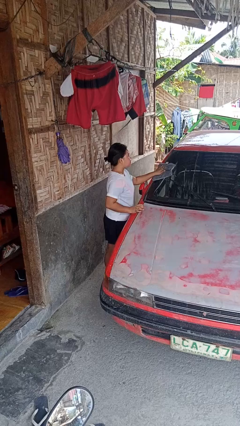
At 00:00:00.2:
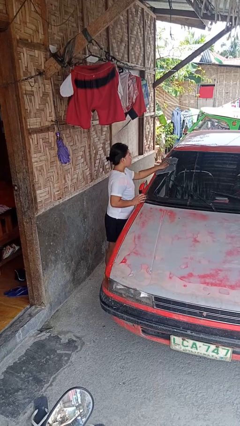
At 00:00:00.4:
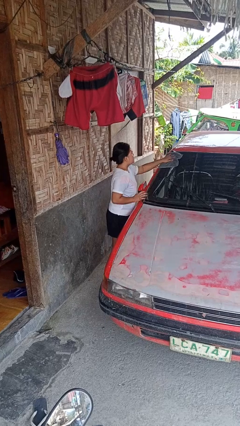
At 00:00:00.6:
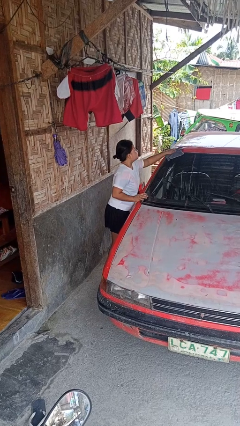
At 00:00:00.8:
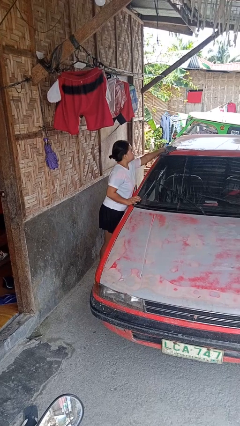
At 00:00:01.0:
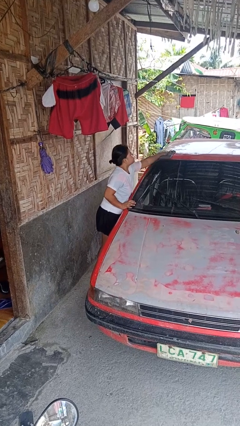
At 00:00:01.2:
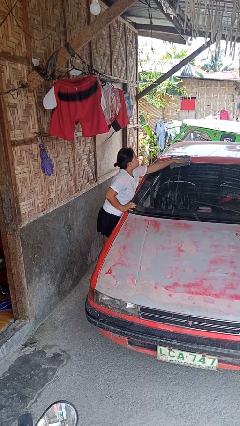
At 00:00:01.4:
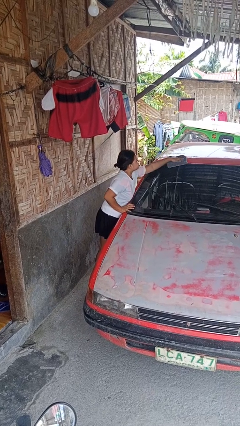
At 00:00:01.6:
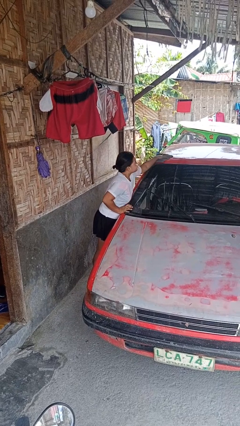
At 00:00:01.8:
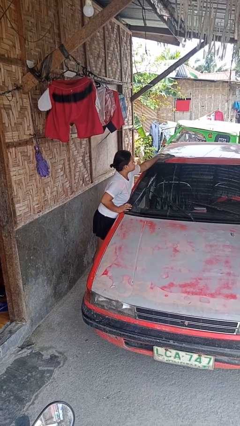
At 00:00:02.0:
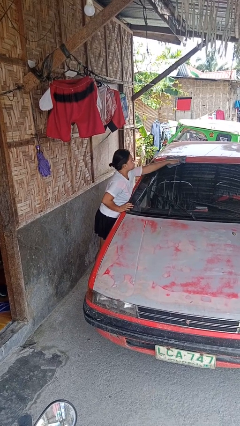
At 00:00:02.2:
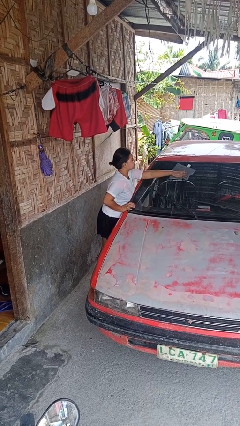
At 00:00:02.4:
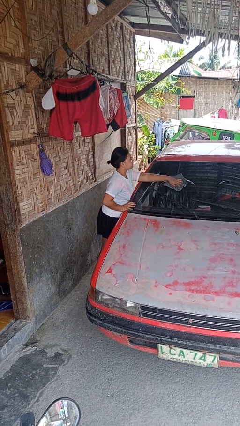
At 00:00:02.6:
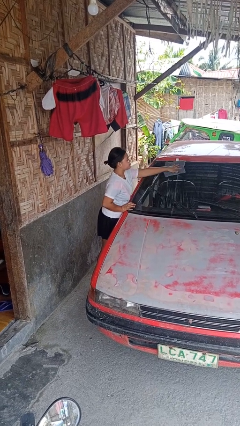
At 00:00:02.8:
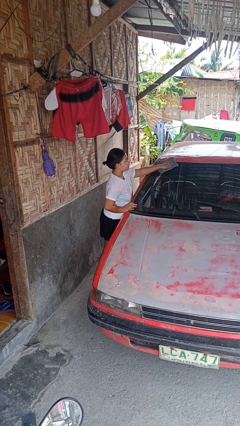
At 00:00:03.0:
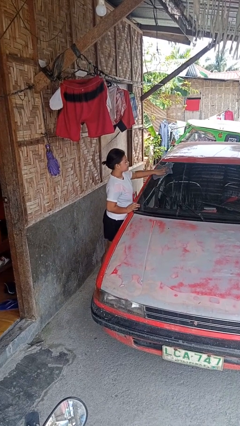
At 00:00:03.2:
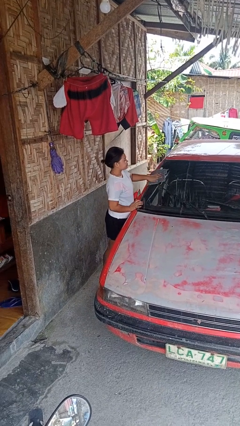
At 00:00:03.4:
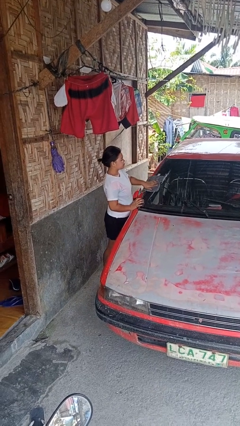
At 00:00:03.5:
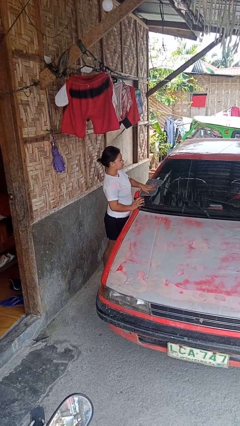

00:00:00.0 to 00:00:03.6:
person polishes car with rag

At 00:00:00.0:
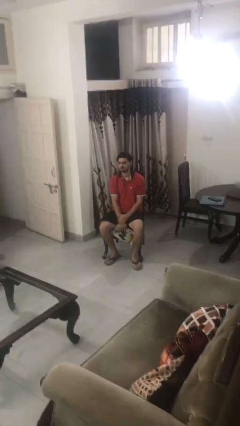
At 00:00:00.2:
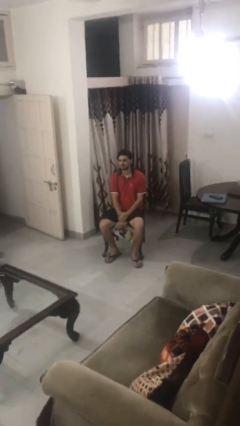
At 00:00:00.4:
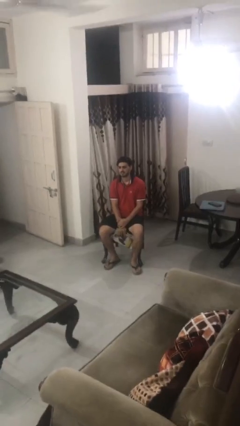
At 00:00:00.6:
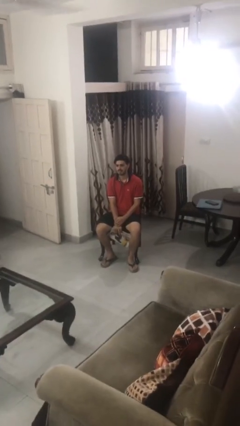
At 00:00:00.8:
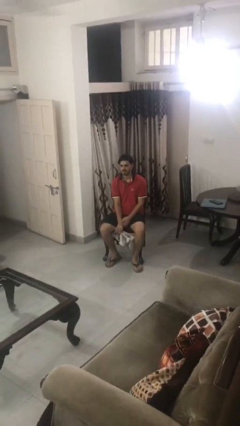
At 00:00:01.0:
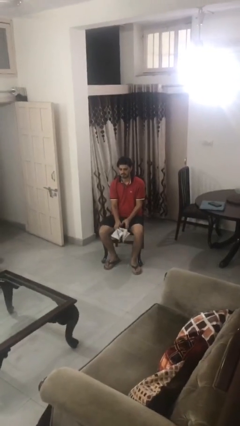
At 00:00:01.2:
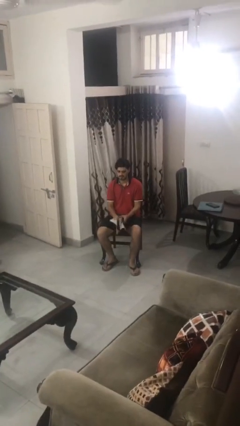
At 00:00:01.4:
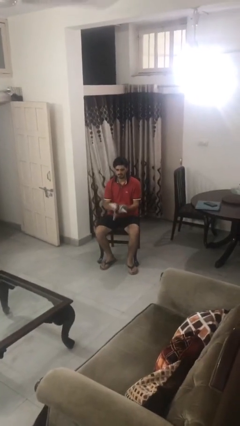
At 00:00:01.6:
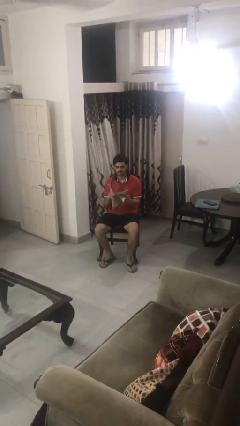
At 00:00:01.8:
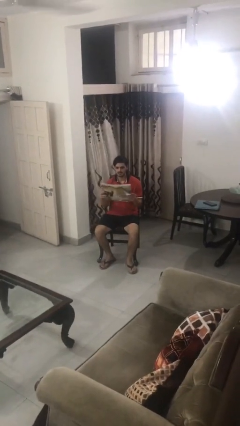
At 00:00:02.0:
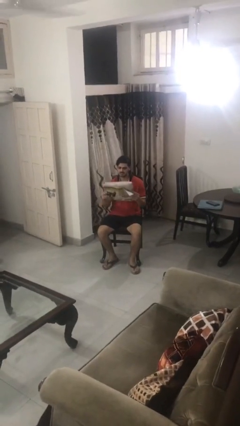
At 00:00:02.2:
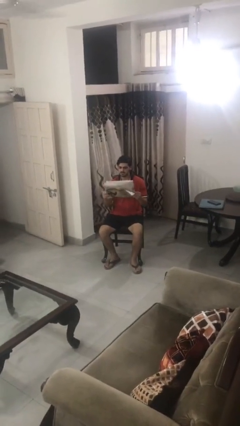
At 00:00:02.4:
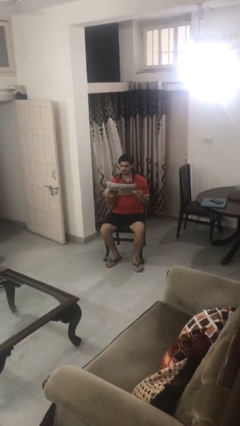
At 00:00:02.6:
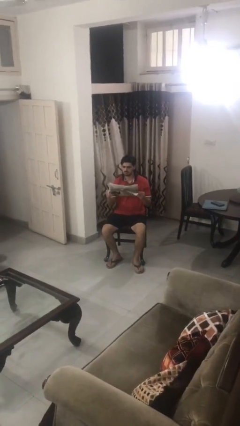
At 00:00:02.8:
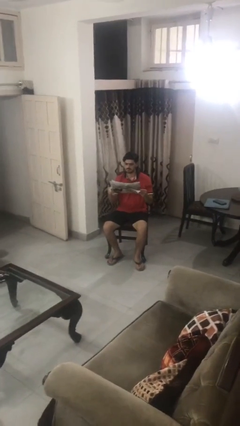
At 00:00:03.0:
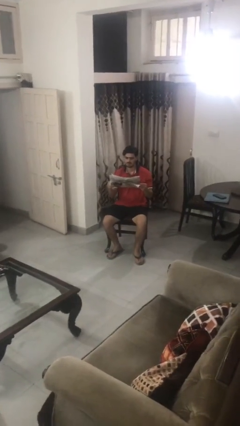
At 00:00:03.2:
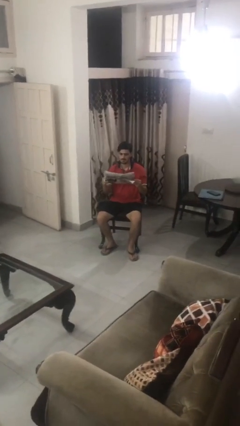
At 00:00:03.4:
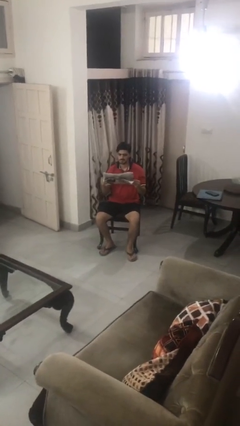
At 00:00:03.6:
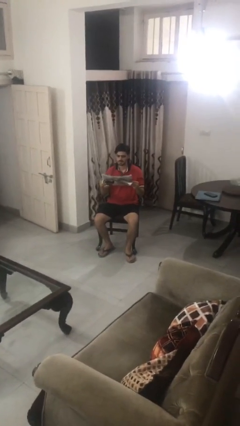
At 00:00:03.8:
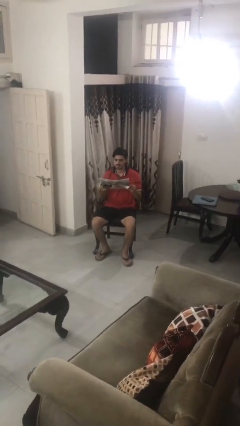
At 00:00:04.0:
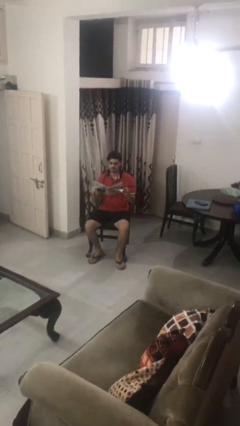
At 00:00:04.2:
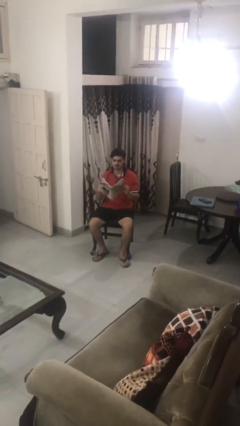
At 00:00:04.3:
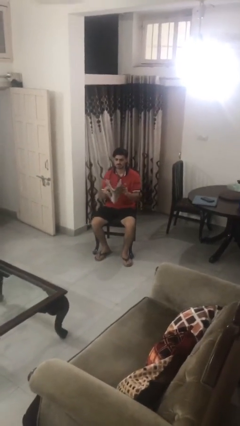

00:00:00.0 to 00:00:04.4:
person reads newspaper

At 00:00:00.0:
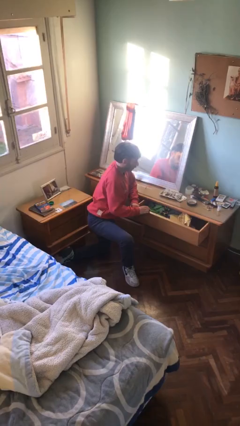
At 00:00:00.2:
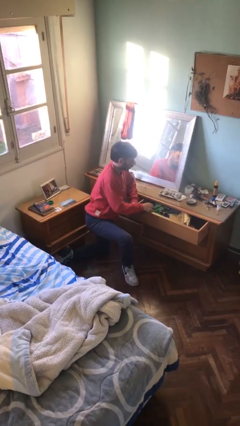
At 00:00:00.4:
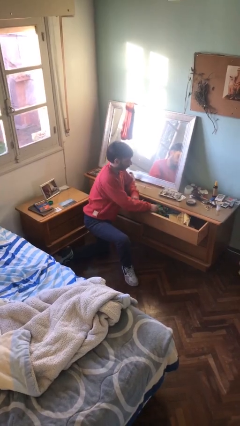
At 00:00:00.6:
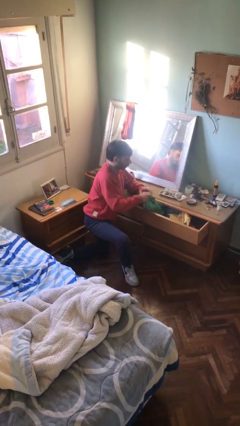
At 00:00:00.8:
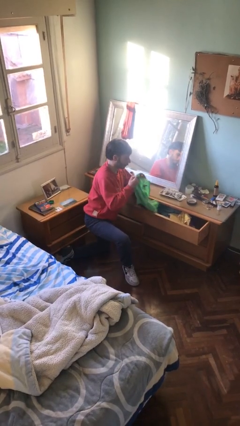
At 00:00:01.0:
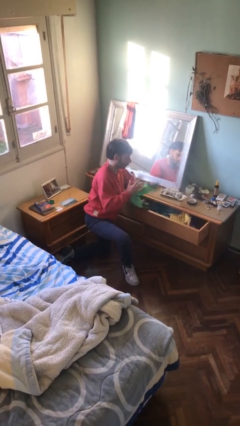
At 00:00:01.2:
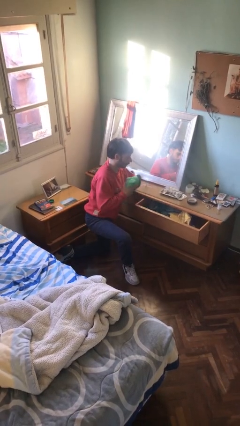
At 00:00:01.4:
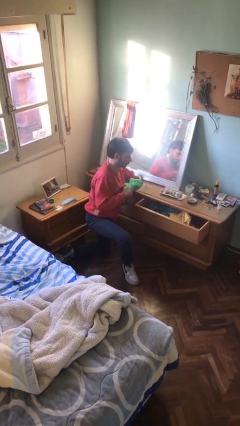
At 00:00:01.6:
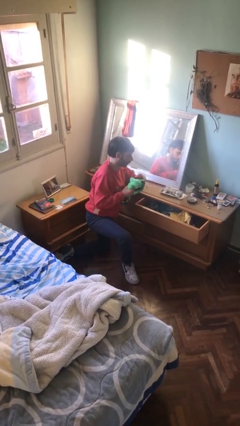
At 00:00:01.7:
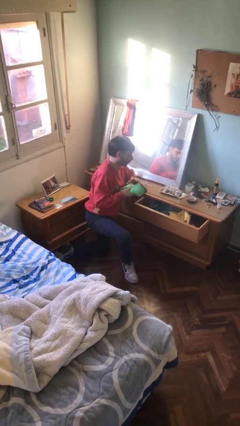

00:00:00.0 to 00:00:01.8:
person takes clothes from dresser

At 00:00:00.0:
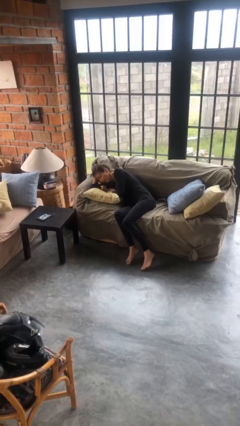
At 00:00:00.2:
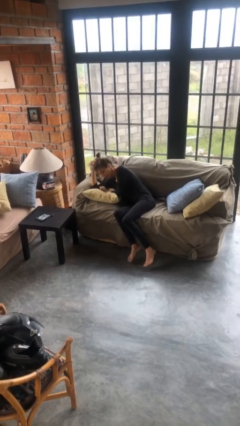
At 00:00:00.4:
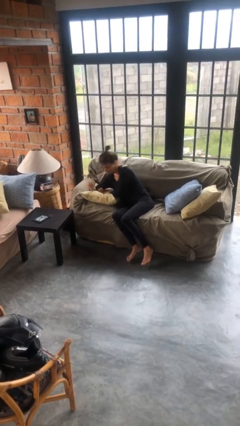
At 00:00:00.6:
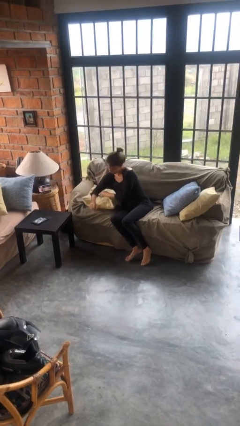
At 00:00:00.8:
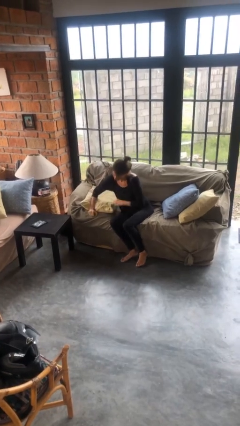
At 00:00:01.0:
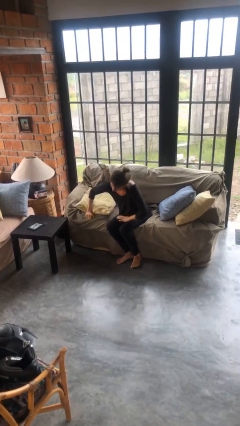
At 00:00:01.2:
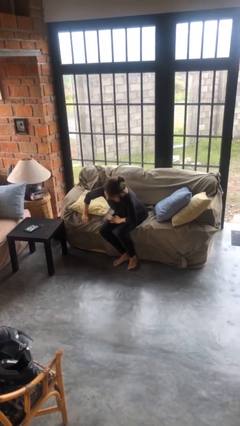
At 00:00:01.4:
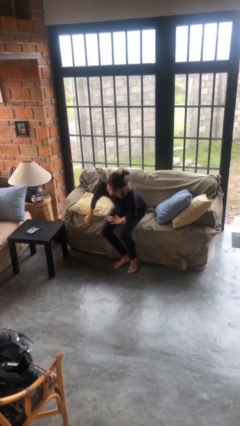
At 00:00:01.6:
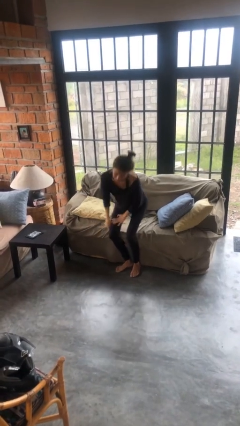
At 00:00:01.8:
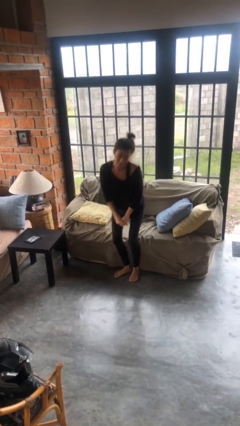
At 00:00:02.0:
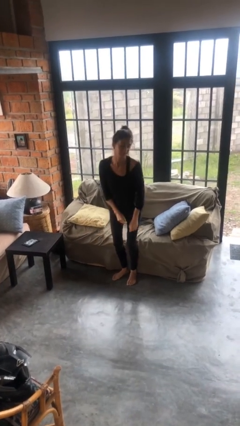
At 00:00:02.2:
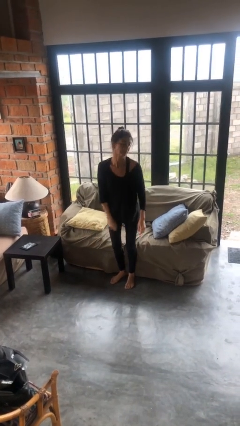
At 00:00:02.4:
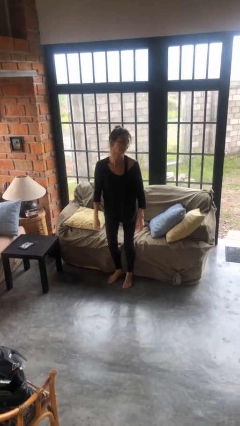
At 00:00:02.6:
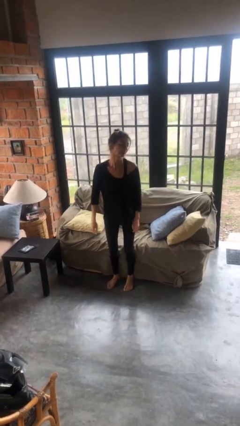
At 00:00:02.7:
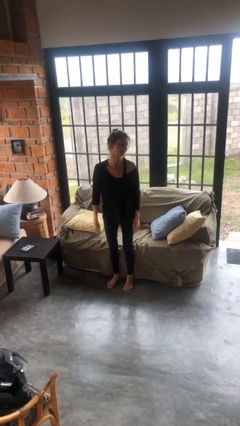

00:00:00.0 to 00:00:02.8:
person stands up

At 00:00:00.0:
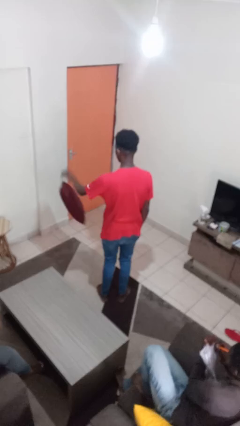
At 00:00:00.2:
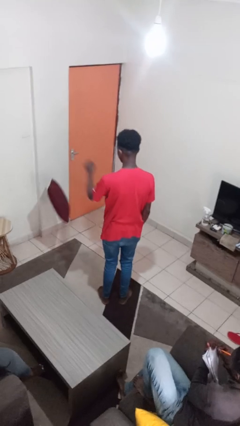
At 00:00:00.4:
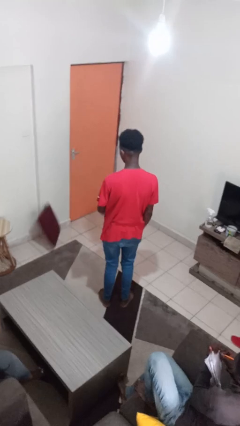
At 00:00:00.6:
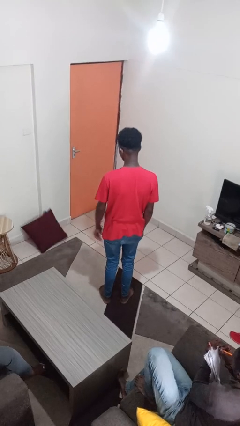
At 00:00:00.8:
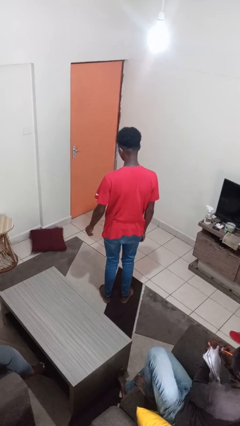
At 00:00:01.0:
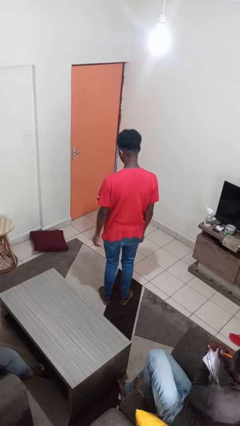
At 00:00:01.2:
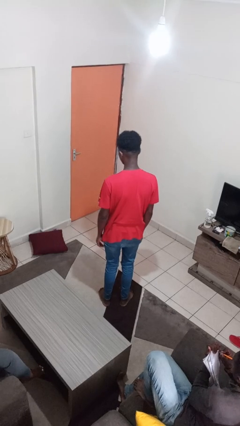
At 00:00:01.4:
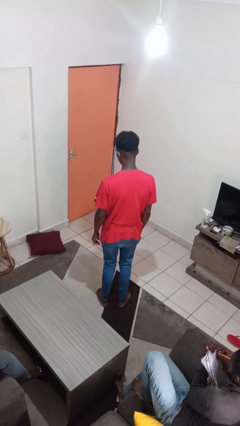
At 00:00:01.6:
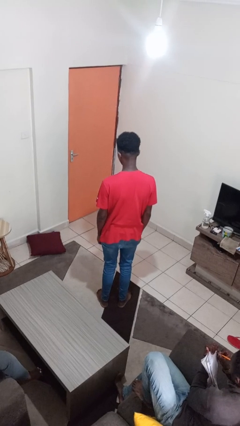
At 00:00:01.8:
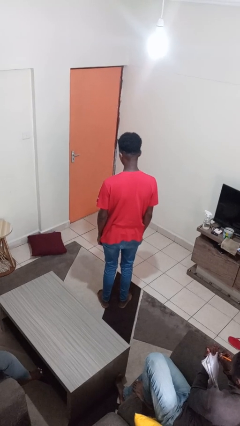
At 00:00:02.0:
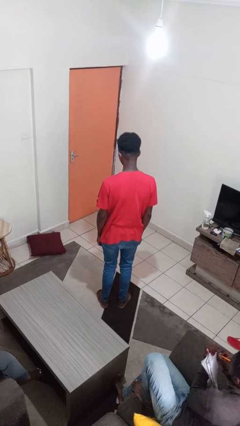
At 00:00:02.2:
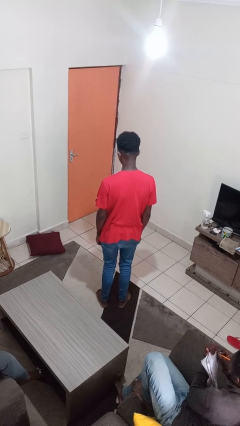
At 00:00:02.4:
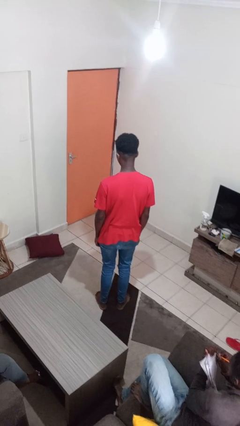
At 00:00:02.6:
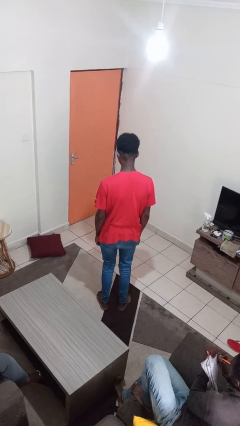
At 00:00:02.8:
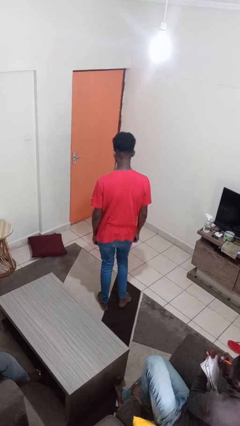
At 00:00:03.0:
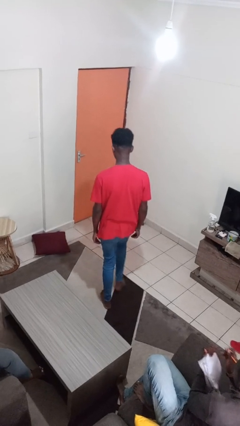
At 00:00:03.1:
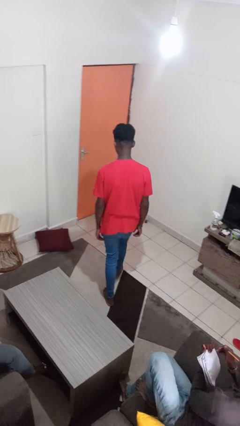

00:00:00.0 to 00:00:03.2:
person throws object to ground

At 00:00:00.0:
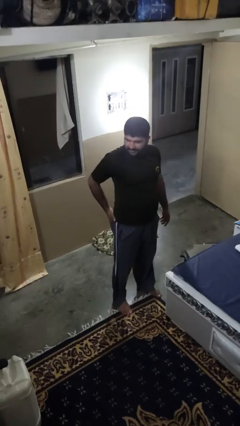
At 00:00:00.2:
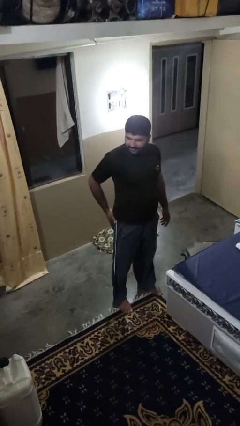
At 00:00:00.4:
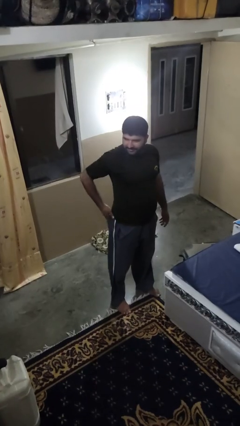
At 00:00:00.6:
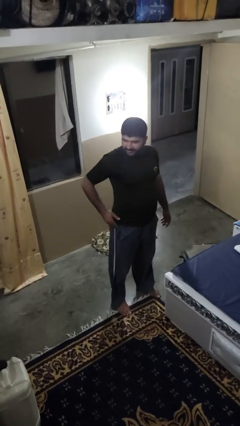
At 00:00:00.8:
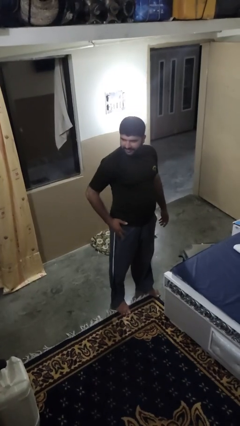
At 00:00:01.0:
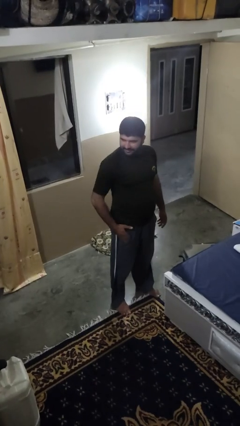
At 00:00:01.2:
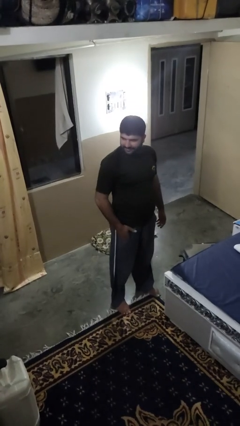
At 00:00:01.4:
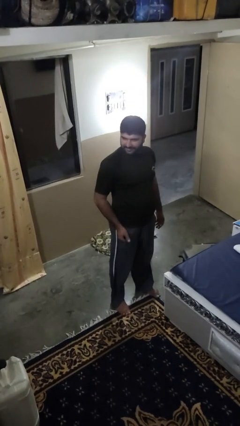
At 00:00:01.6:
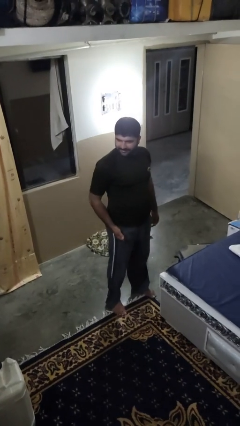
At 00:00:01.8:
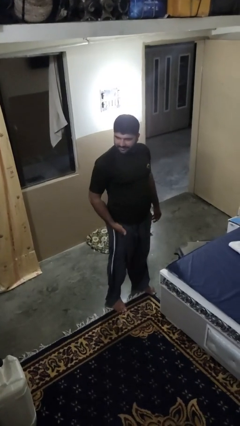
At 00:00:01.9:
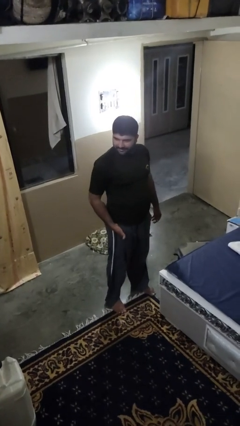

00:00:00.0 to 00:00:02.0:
person puts hands in back pockets
